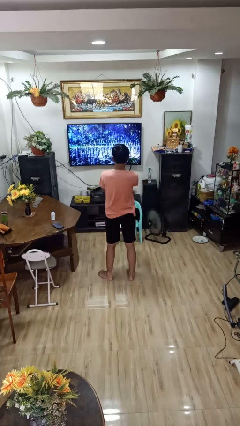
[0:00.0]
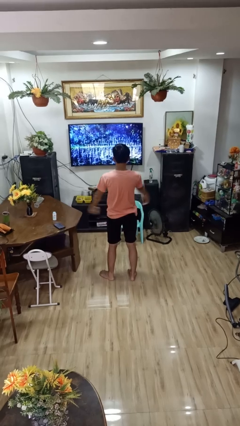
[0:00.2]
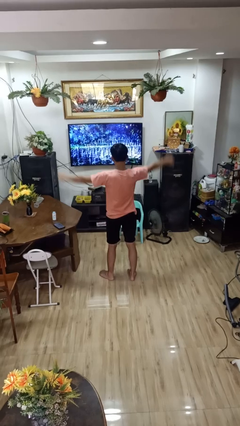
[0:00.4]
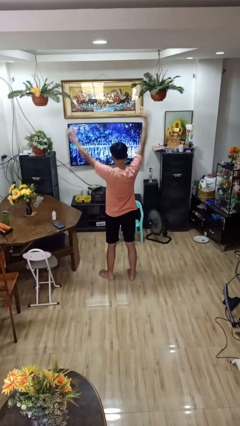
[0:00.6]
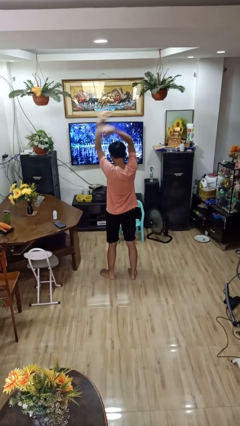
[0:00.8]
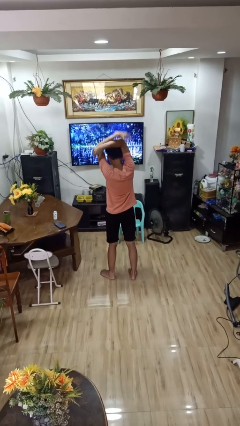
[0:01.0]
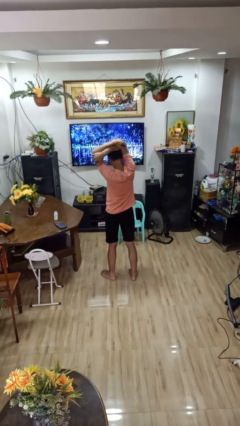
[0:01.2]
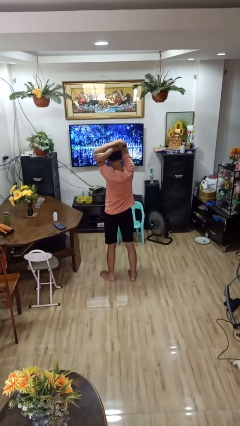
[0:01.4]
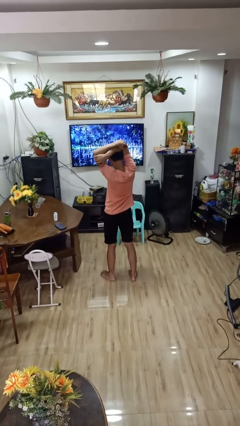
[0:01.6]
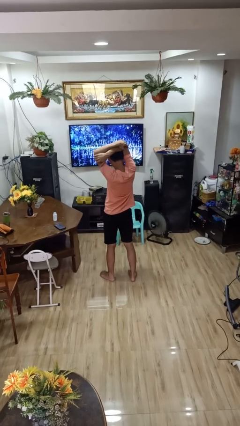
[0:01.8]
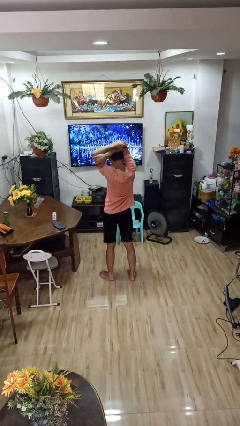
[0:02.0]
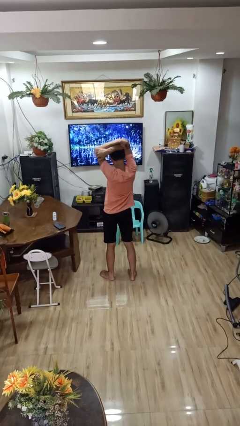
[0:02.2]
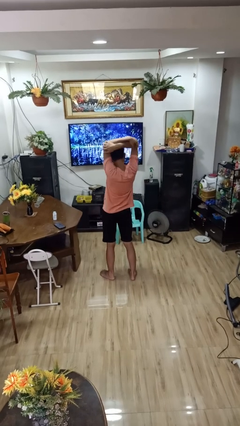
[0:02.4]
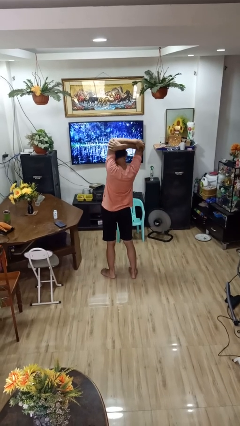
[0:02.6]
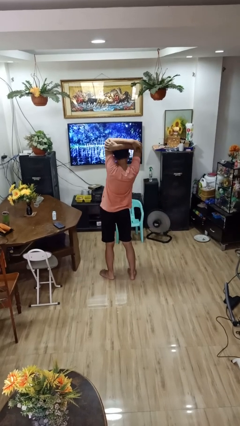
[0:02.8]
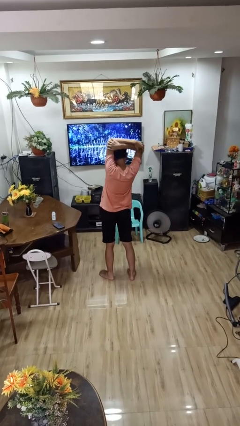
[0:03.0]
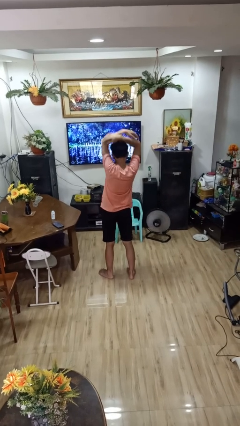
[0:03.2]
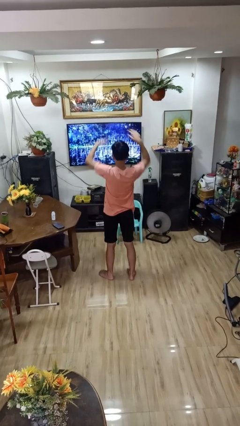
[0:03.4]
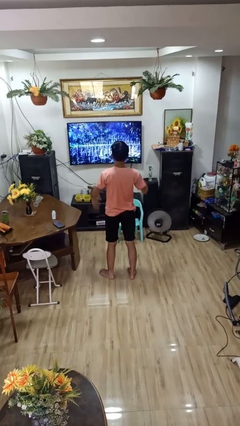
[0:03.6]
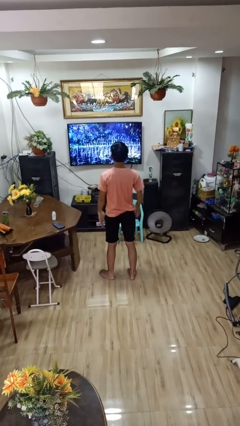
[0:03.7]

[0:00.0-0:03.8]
person stretches arms over head

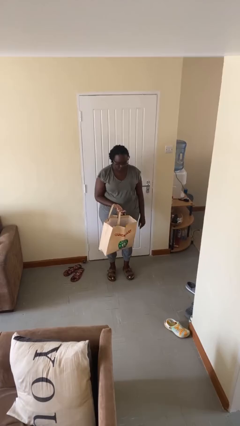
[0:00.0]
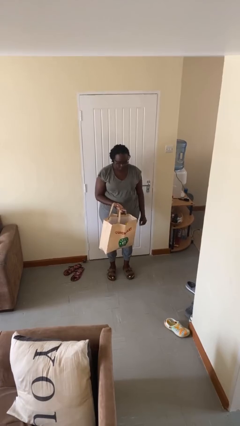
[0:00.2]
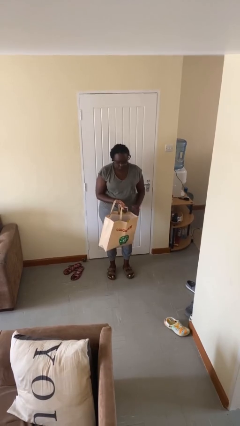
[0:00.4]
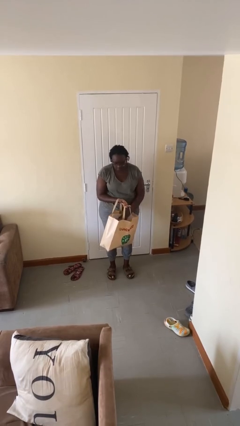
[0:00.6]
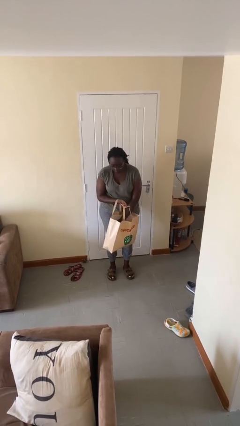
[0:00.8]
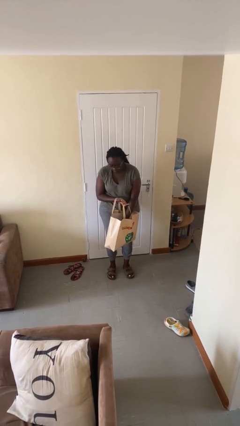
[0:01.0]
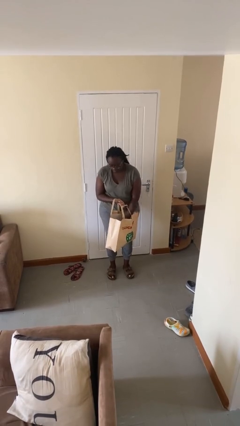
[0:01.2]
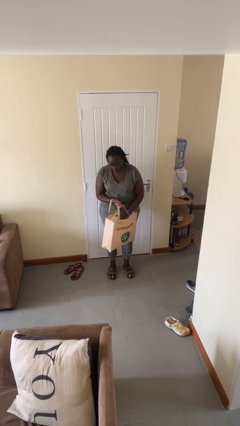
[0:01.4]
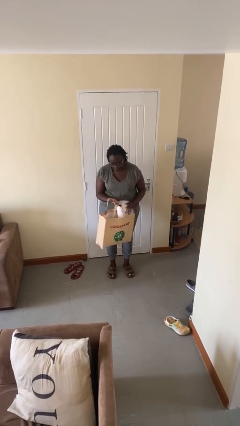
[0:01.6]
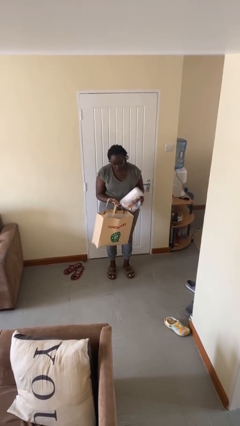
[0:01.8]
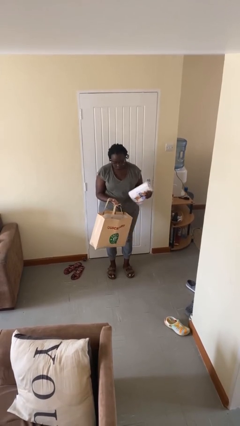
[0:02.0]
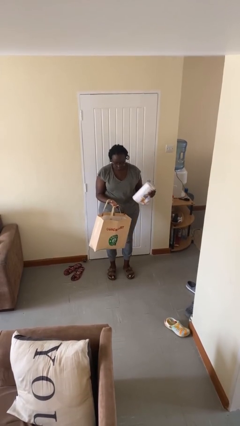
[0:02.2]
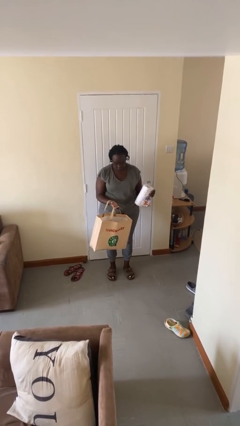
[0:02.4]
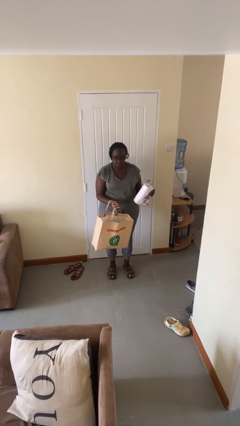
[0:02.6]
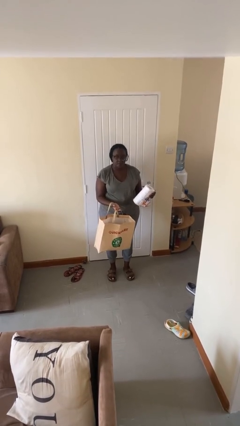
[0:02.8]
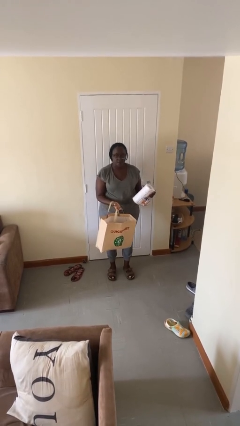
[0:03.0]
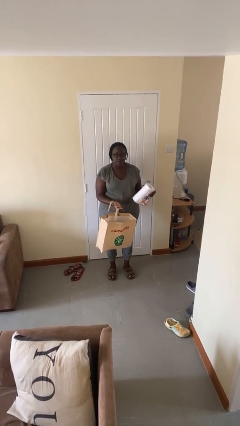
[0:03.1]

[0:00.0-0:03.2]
person takes object from bag

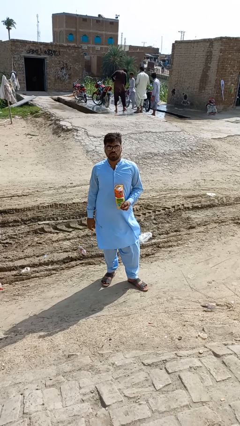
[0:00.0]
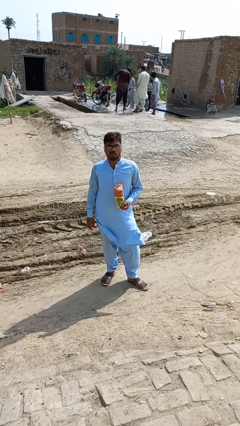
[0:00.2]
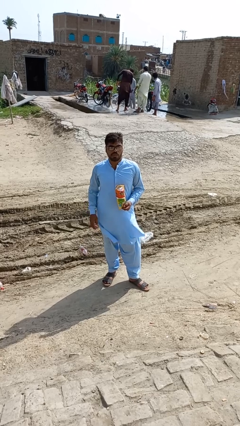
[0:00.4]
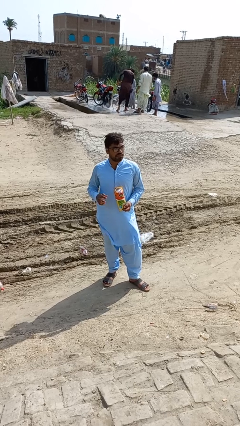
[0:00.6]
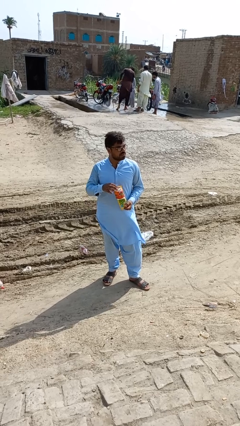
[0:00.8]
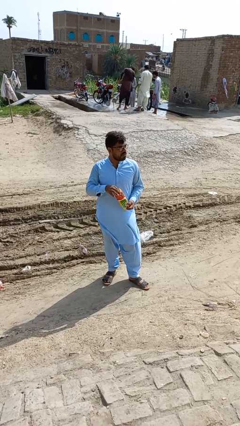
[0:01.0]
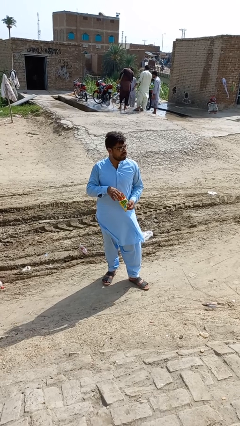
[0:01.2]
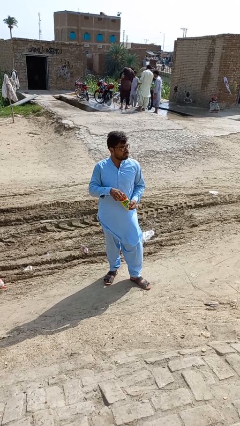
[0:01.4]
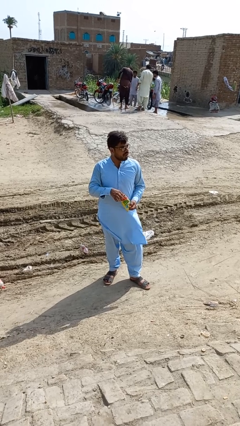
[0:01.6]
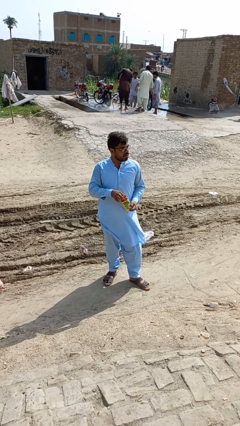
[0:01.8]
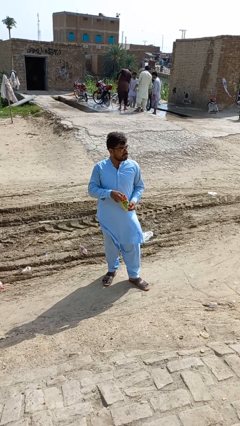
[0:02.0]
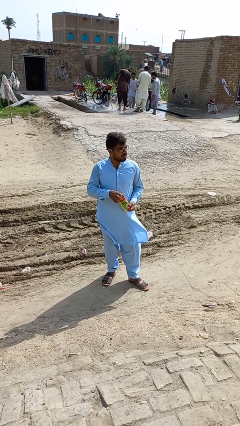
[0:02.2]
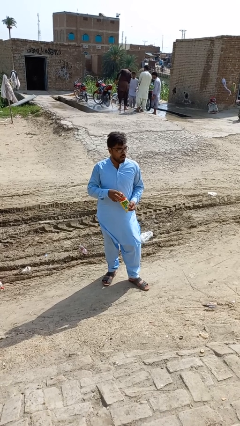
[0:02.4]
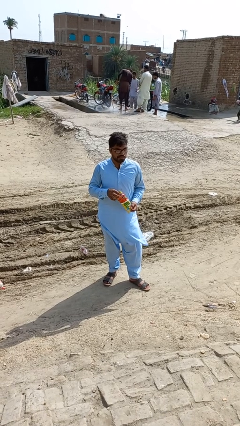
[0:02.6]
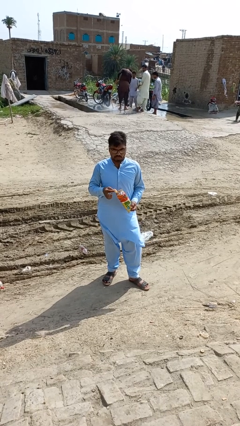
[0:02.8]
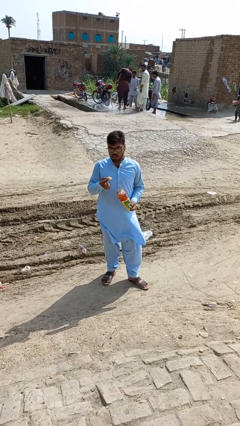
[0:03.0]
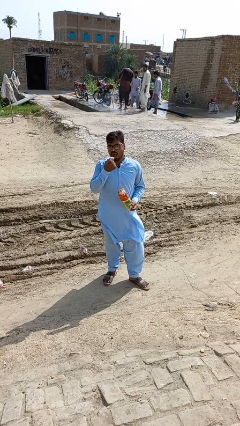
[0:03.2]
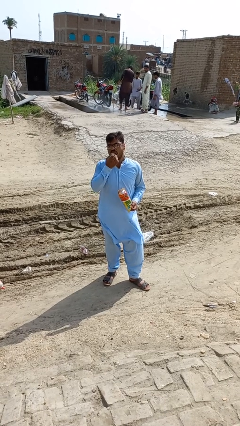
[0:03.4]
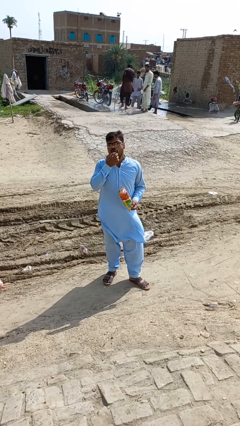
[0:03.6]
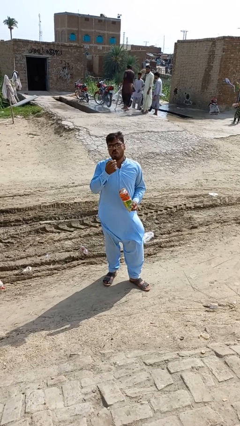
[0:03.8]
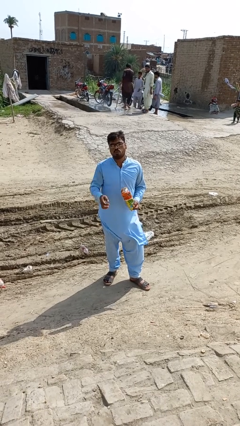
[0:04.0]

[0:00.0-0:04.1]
person eats snack from bag

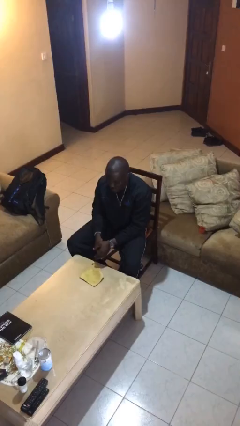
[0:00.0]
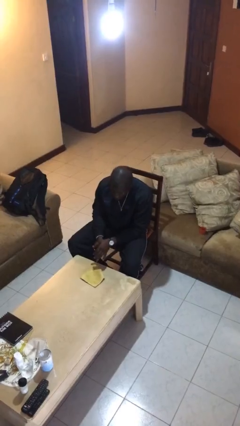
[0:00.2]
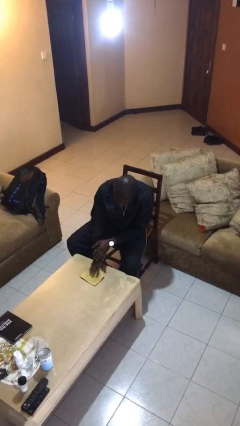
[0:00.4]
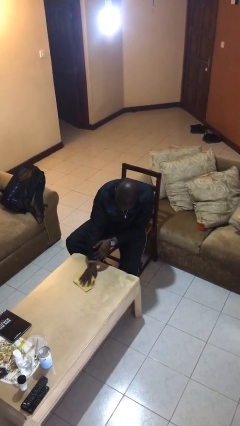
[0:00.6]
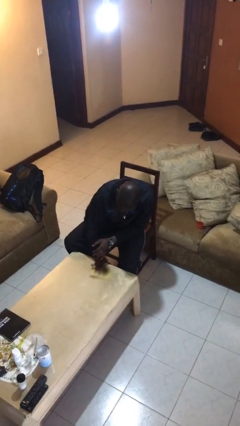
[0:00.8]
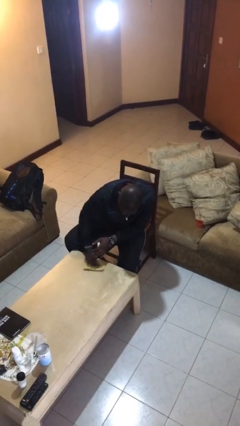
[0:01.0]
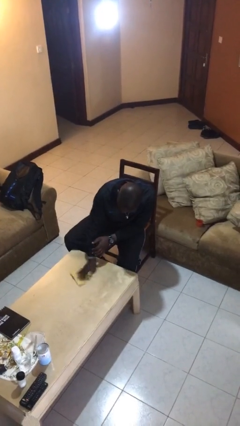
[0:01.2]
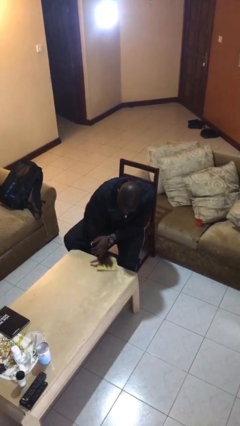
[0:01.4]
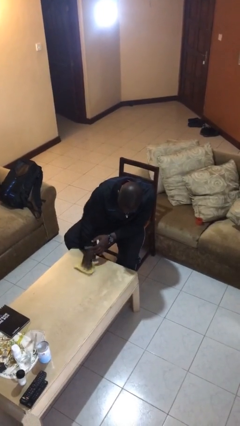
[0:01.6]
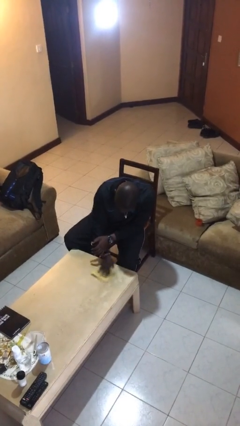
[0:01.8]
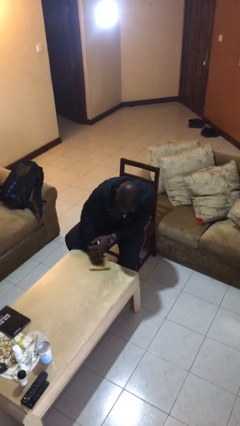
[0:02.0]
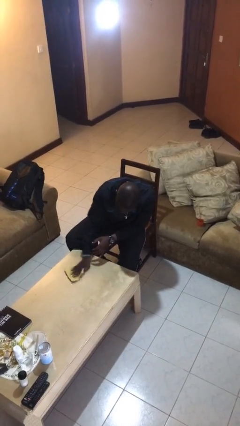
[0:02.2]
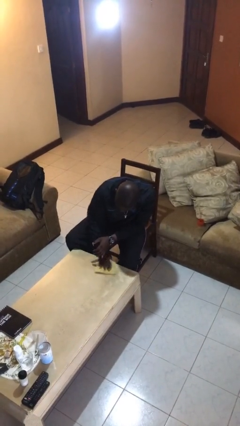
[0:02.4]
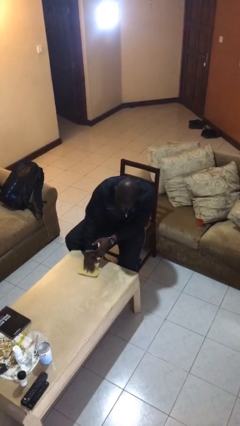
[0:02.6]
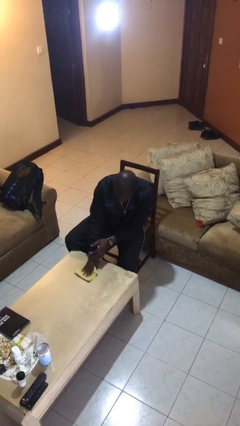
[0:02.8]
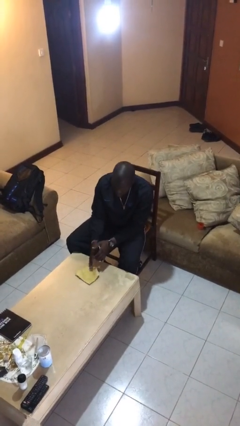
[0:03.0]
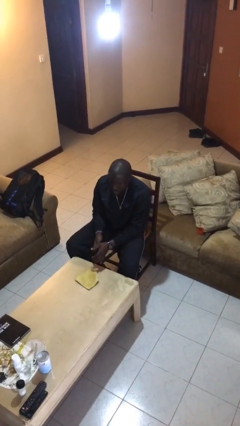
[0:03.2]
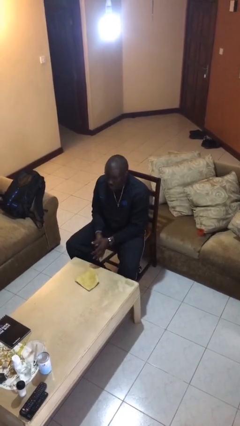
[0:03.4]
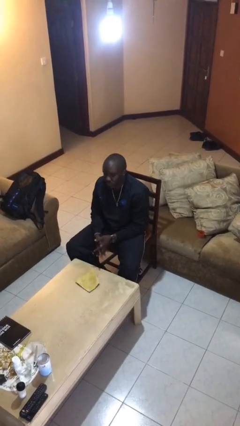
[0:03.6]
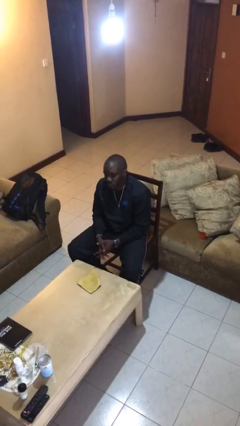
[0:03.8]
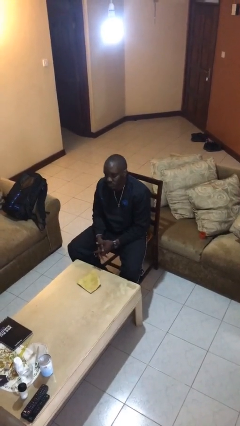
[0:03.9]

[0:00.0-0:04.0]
person cleans table with rag

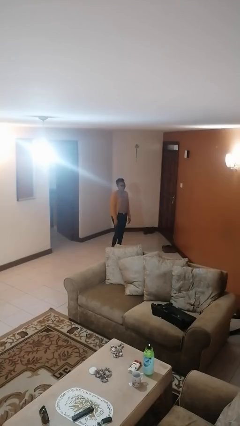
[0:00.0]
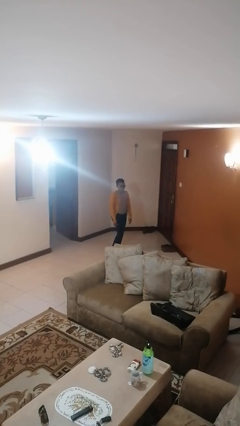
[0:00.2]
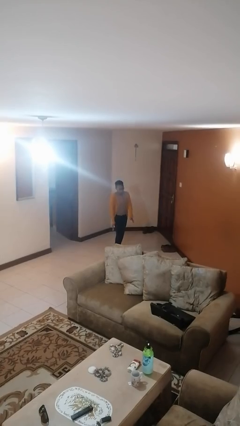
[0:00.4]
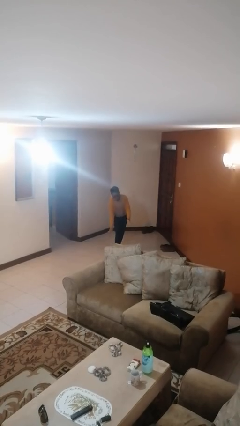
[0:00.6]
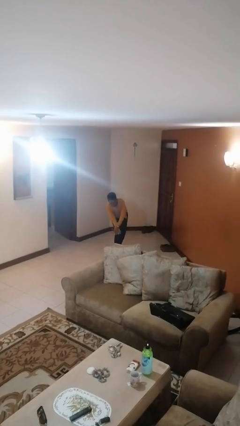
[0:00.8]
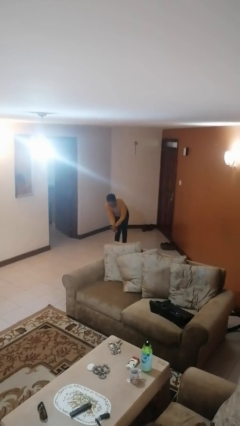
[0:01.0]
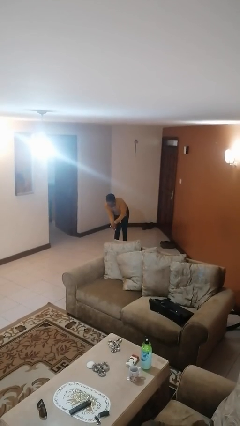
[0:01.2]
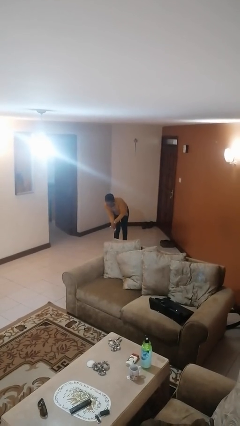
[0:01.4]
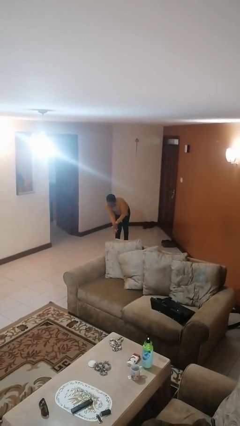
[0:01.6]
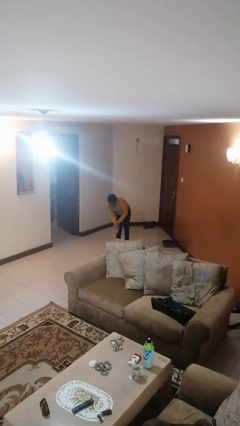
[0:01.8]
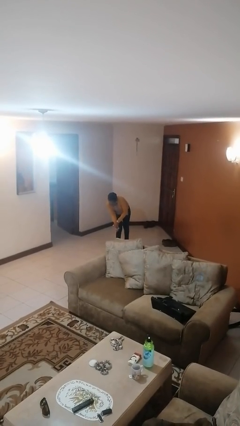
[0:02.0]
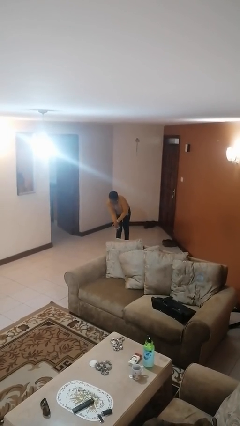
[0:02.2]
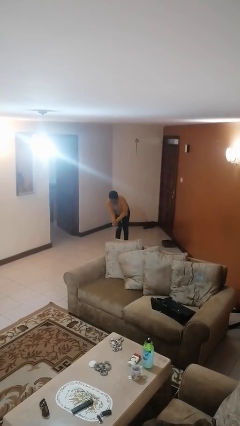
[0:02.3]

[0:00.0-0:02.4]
person claps hands

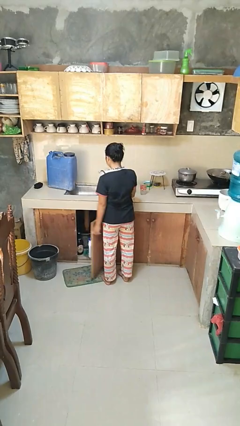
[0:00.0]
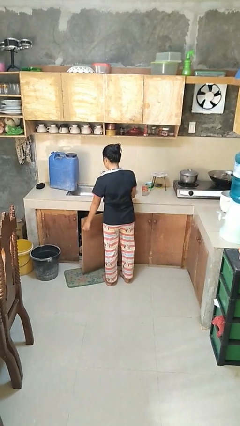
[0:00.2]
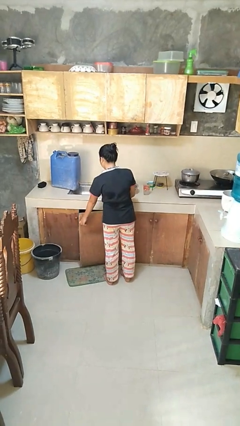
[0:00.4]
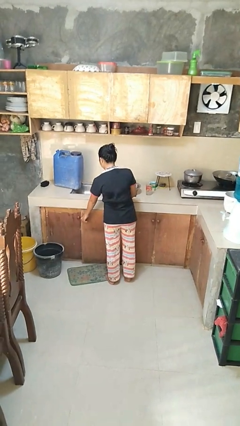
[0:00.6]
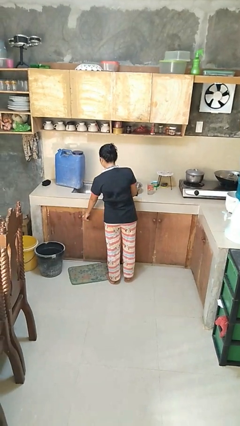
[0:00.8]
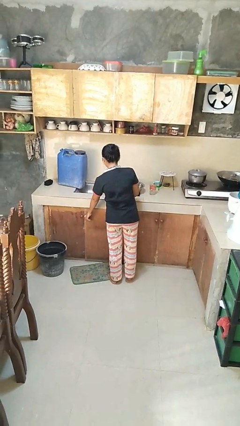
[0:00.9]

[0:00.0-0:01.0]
person closes cabinet
